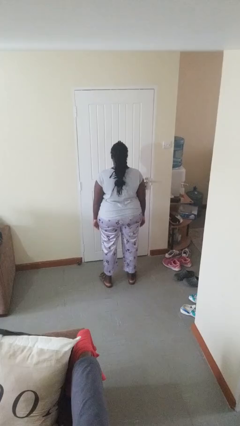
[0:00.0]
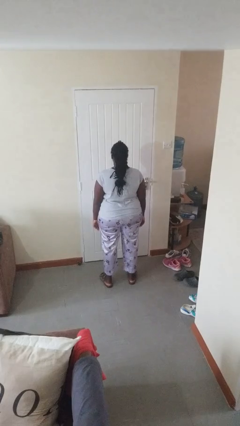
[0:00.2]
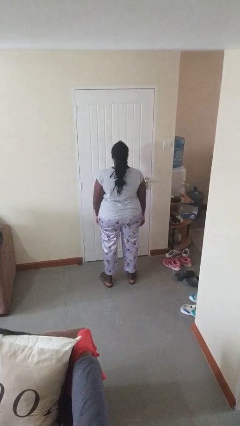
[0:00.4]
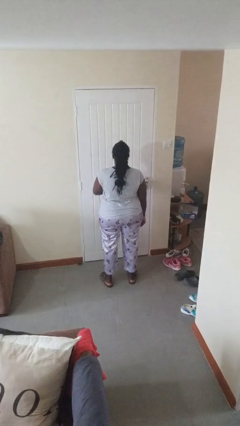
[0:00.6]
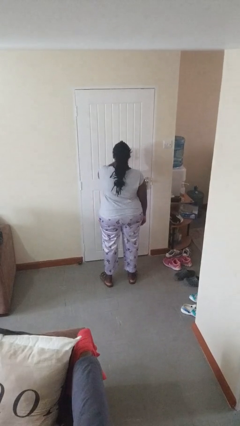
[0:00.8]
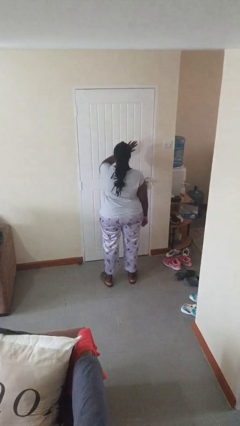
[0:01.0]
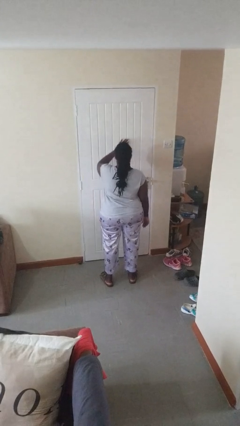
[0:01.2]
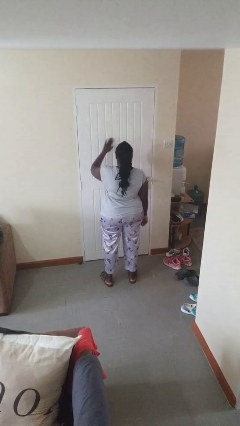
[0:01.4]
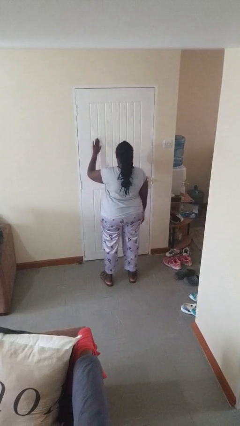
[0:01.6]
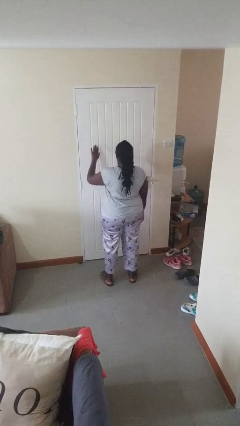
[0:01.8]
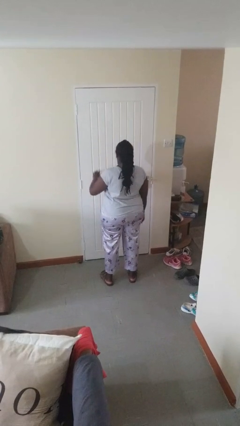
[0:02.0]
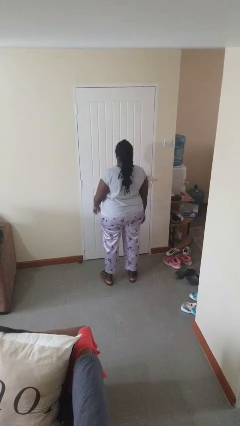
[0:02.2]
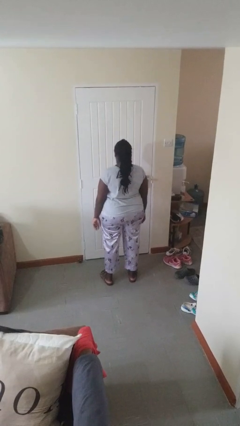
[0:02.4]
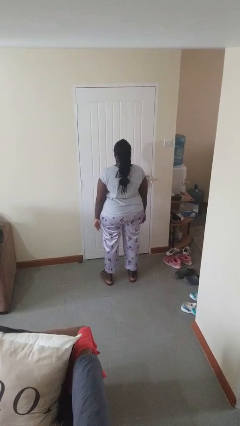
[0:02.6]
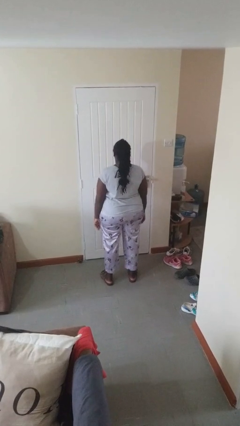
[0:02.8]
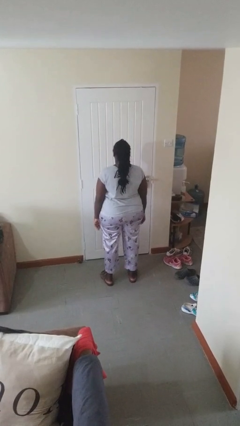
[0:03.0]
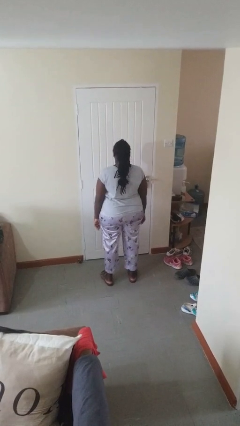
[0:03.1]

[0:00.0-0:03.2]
person gestures swipe left

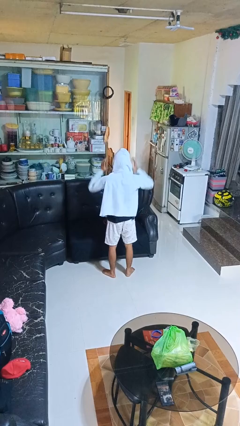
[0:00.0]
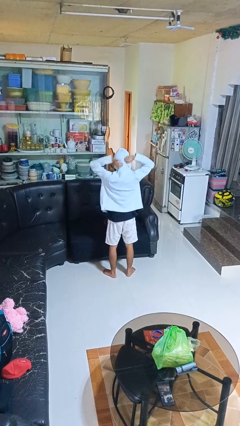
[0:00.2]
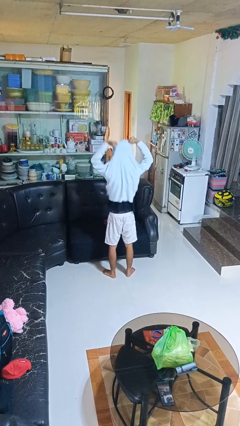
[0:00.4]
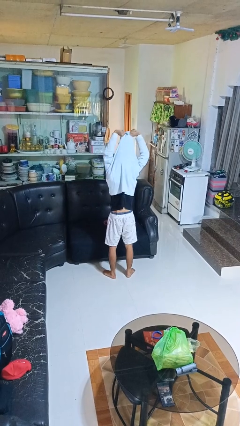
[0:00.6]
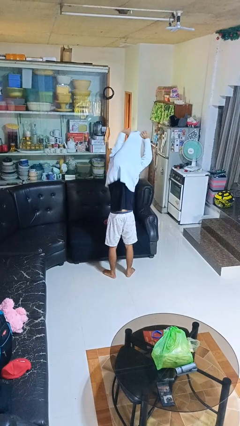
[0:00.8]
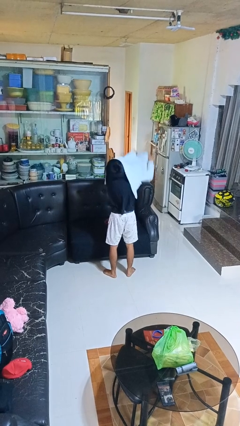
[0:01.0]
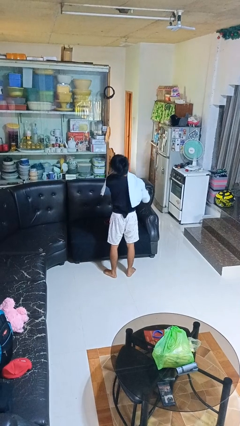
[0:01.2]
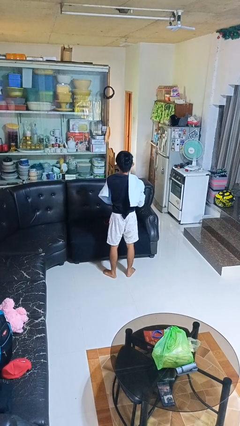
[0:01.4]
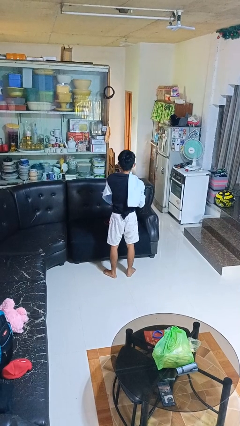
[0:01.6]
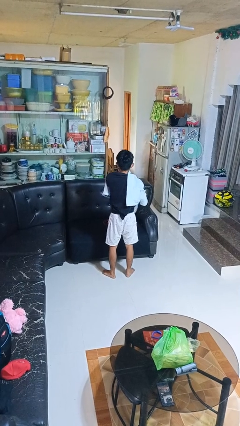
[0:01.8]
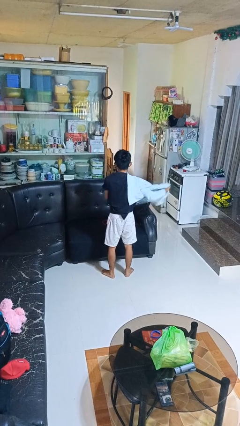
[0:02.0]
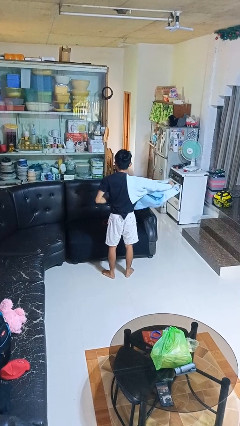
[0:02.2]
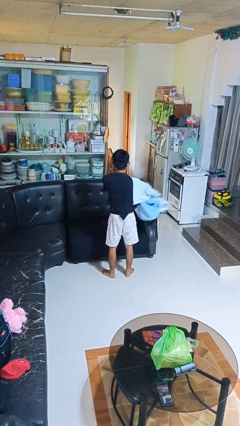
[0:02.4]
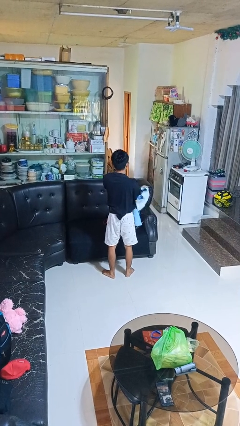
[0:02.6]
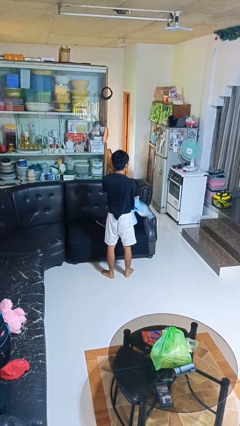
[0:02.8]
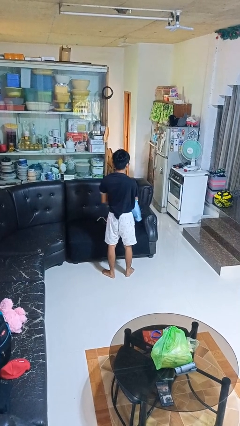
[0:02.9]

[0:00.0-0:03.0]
person takes off hoodie

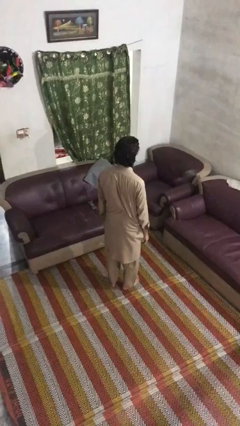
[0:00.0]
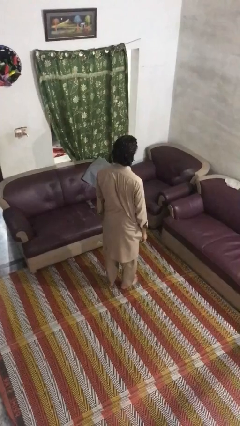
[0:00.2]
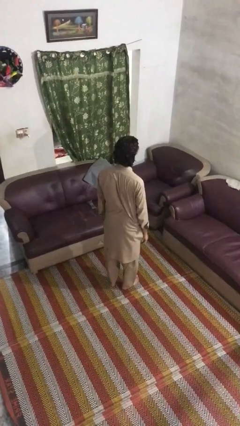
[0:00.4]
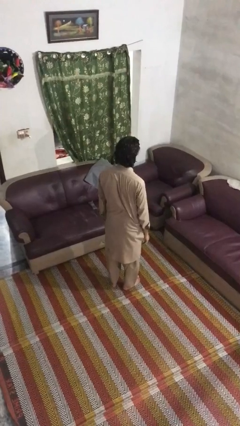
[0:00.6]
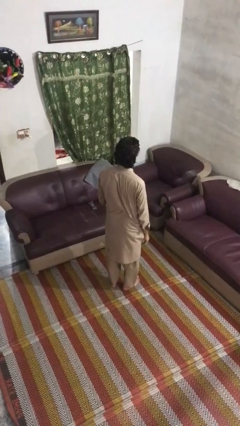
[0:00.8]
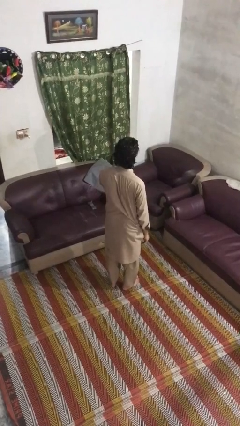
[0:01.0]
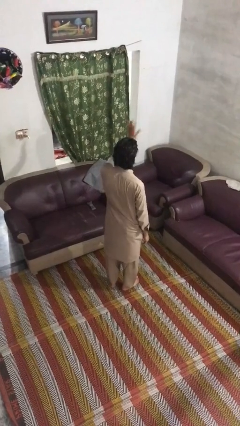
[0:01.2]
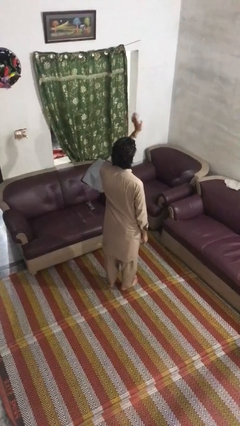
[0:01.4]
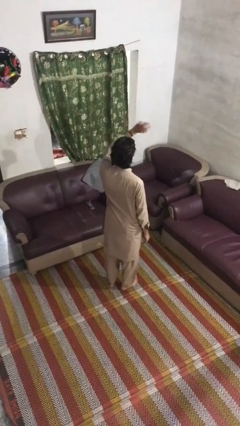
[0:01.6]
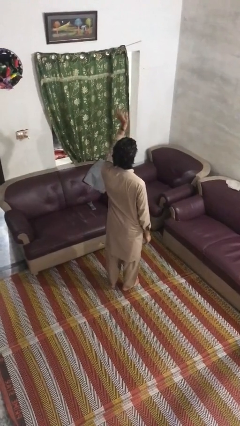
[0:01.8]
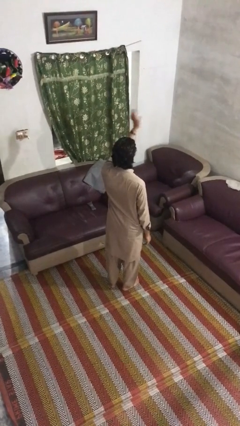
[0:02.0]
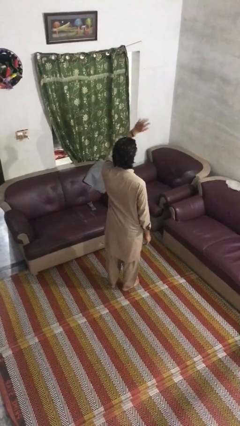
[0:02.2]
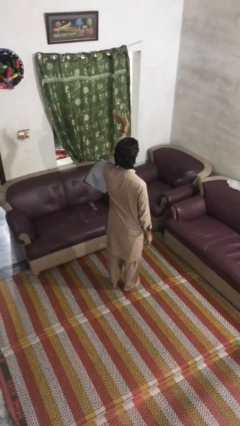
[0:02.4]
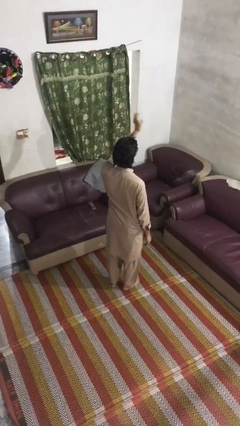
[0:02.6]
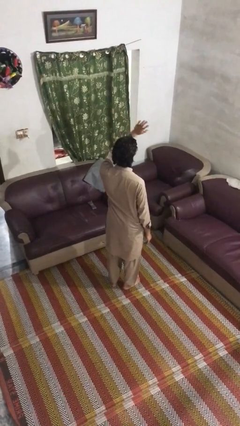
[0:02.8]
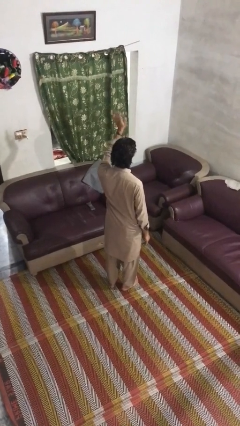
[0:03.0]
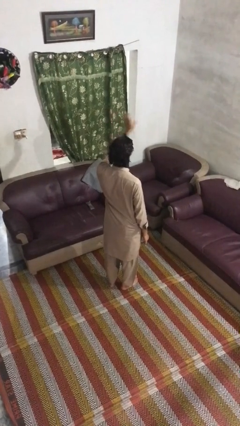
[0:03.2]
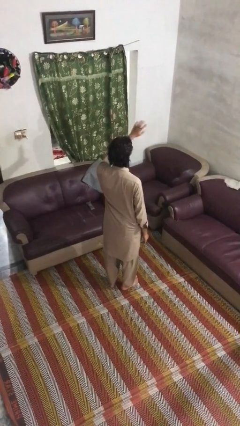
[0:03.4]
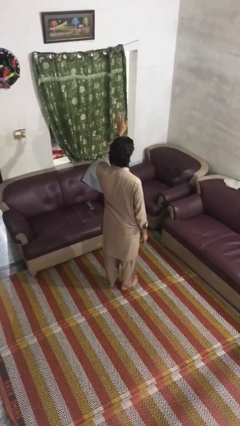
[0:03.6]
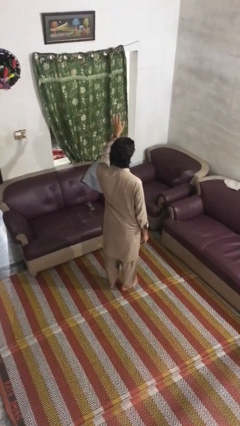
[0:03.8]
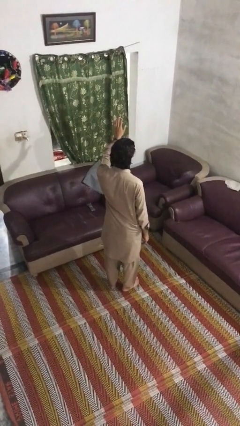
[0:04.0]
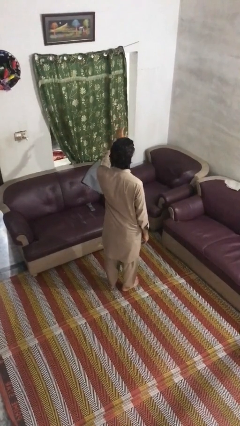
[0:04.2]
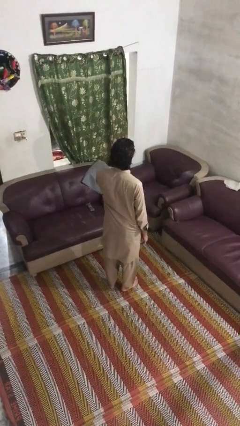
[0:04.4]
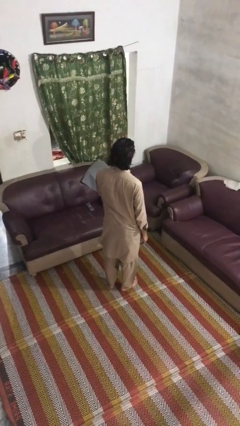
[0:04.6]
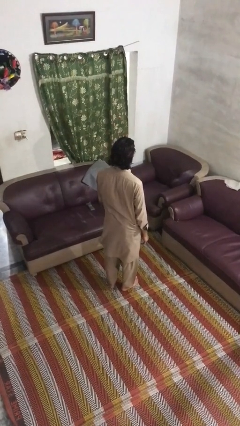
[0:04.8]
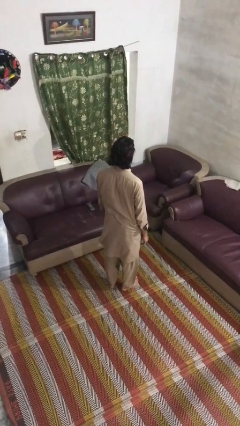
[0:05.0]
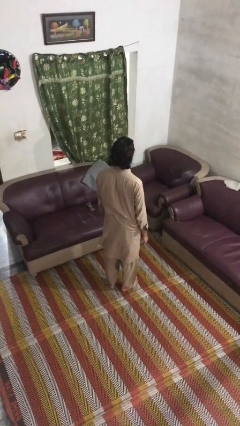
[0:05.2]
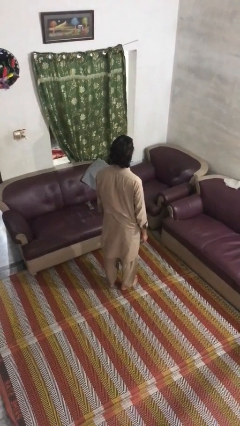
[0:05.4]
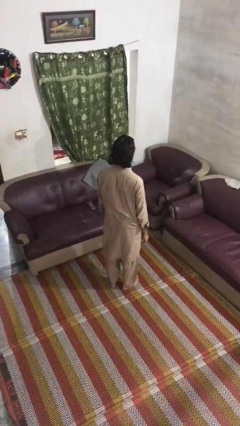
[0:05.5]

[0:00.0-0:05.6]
person waves at person

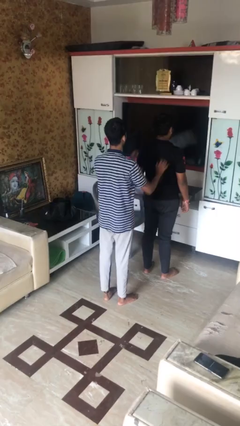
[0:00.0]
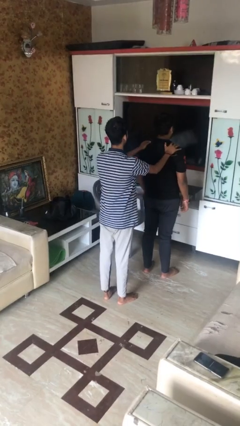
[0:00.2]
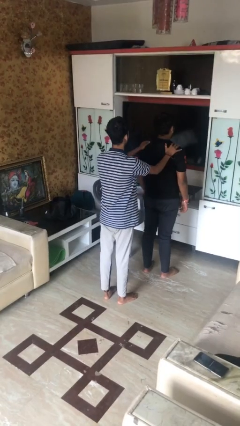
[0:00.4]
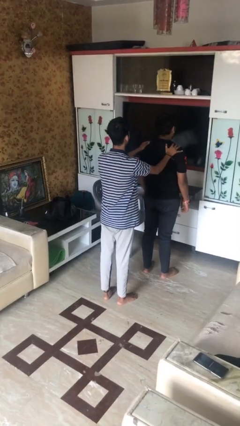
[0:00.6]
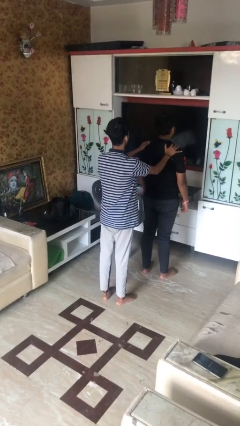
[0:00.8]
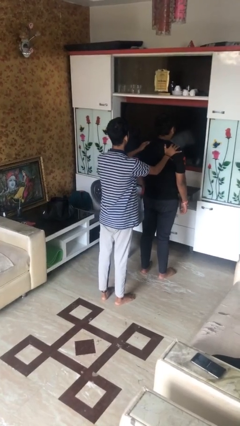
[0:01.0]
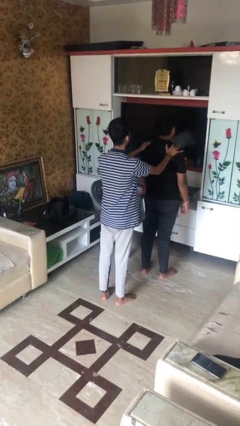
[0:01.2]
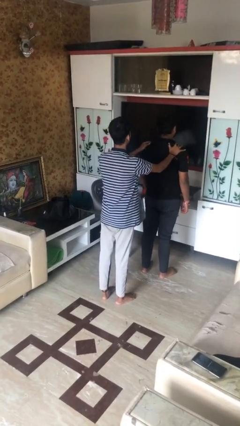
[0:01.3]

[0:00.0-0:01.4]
person grabs person by shoulder

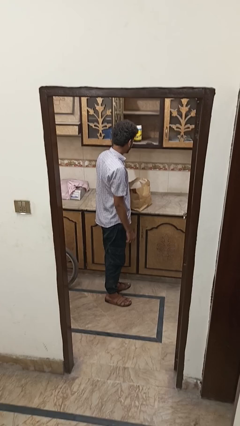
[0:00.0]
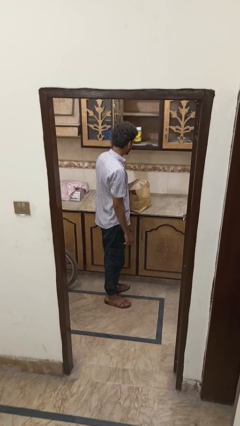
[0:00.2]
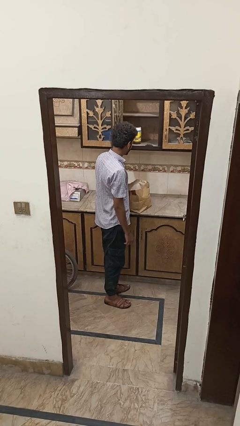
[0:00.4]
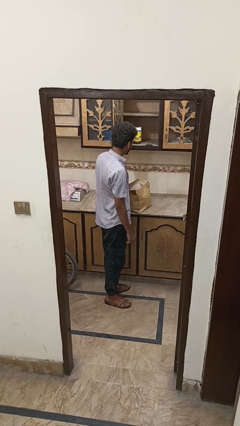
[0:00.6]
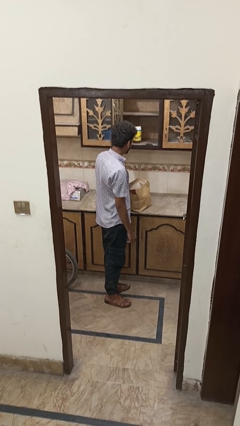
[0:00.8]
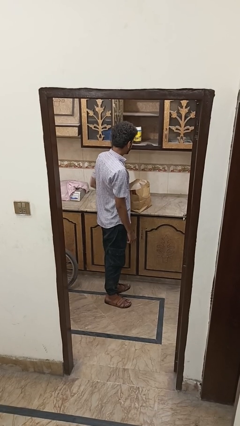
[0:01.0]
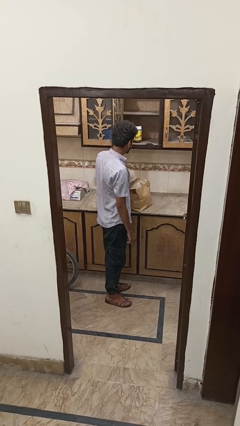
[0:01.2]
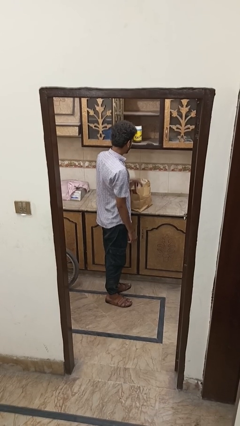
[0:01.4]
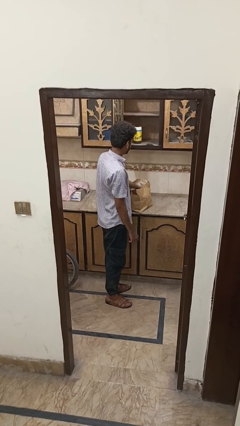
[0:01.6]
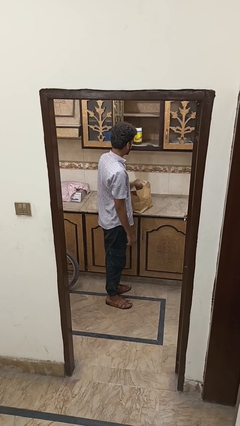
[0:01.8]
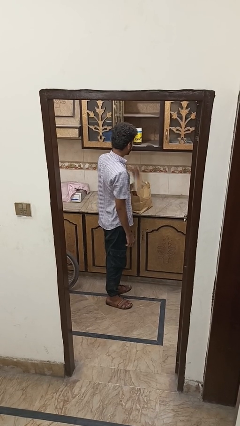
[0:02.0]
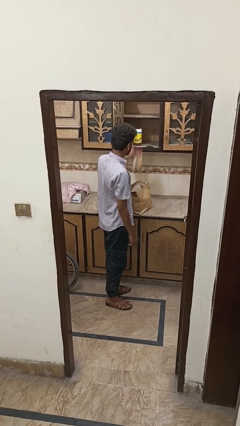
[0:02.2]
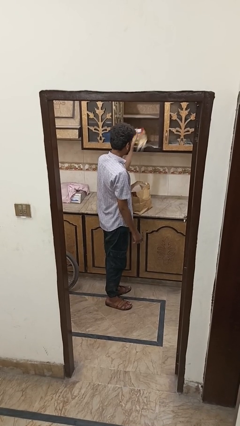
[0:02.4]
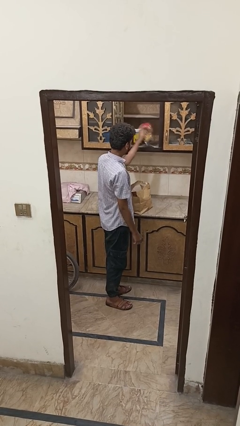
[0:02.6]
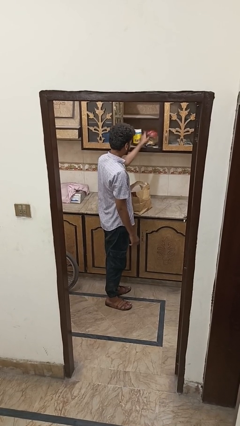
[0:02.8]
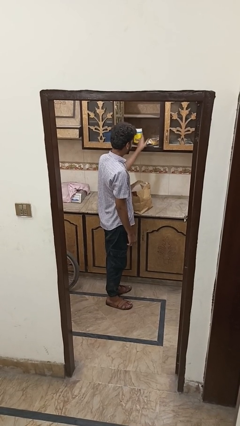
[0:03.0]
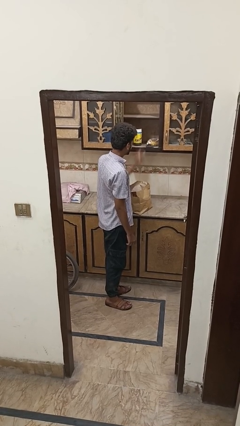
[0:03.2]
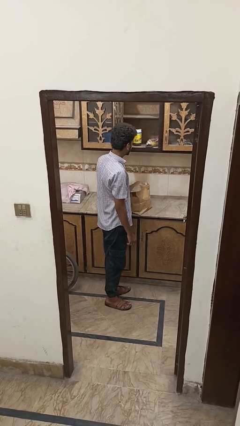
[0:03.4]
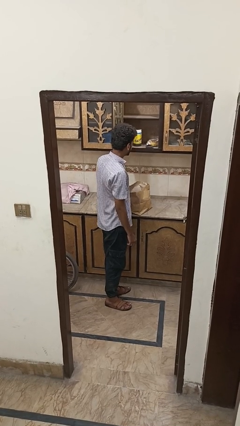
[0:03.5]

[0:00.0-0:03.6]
person uncovers with bedsheets

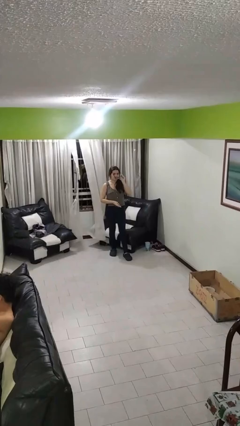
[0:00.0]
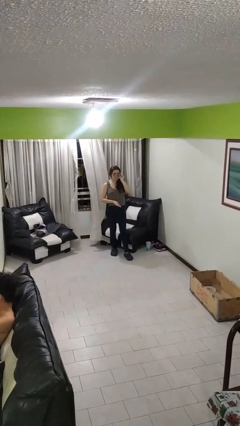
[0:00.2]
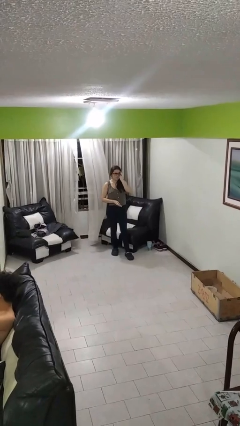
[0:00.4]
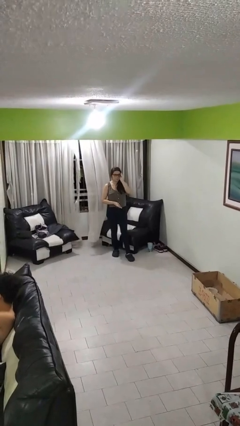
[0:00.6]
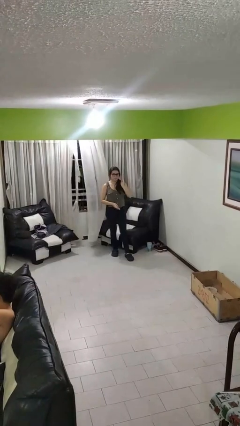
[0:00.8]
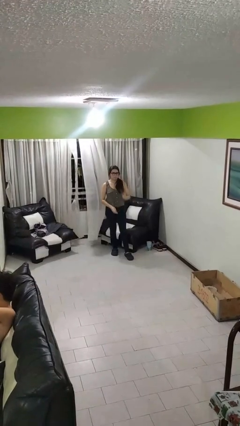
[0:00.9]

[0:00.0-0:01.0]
person puts on glasses
